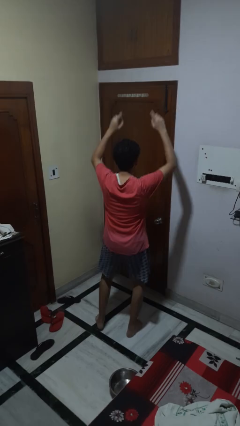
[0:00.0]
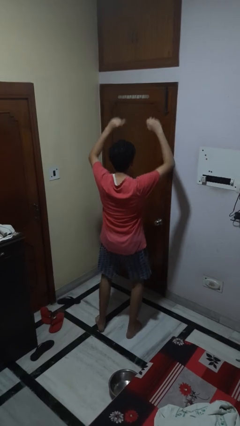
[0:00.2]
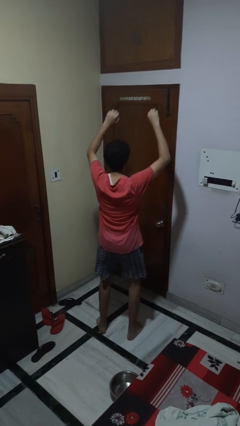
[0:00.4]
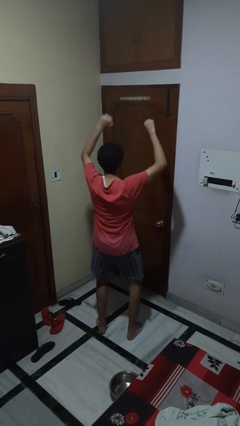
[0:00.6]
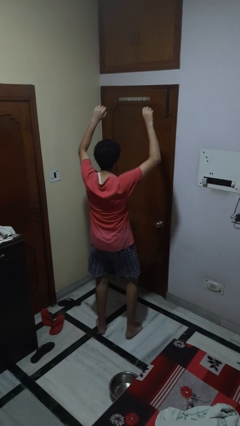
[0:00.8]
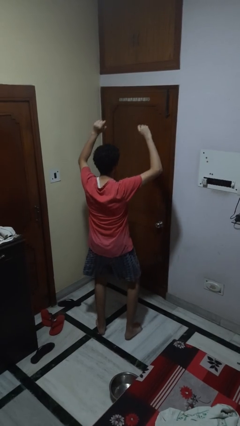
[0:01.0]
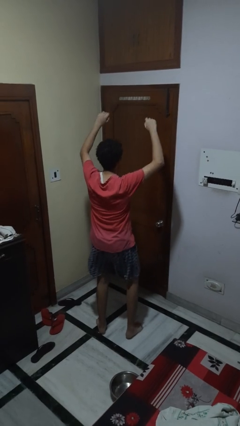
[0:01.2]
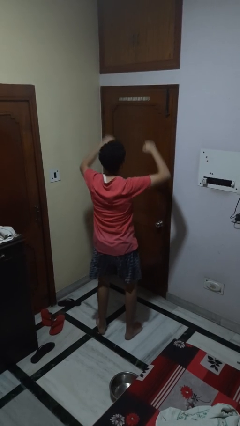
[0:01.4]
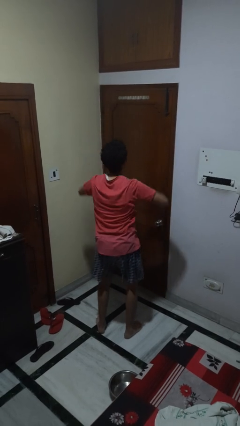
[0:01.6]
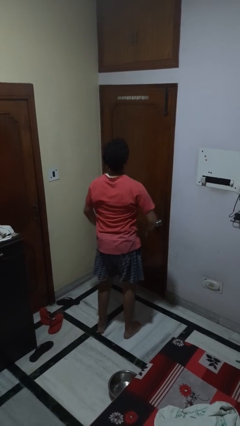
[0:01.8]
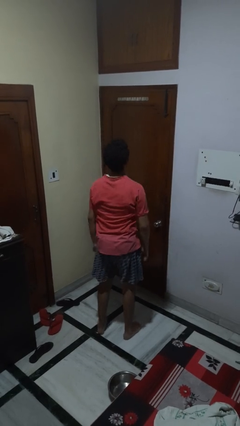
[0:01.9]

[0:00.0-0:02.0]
person dances in place

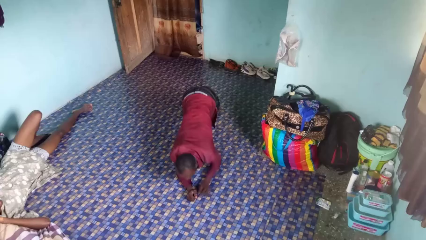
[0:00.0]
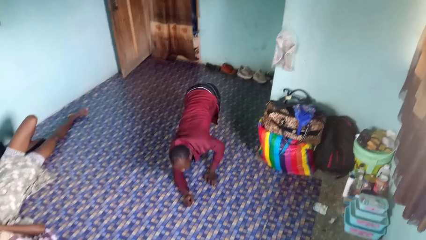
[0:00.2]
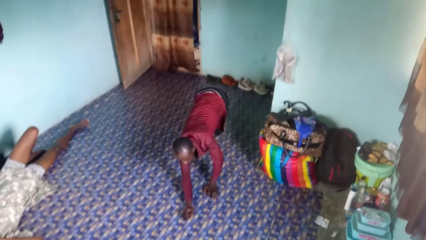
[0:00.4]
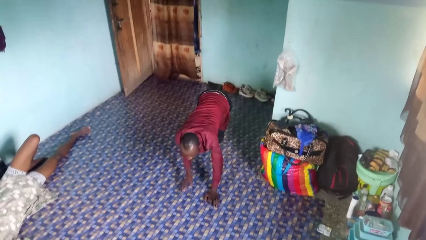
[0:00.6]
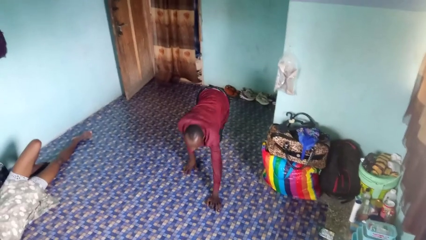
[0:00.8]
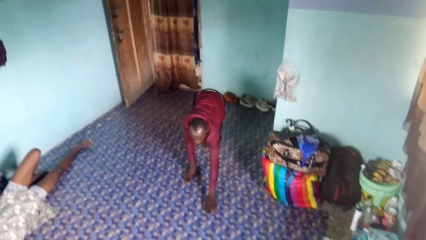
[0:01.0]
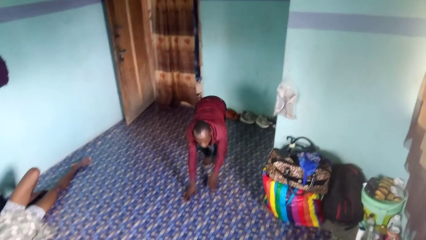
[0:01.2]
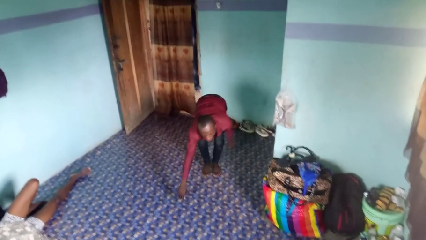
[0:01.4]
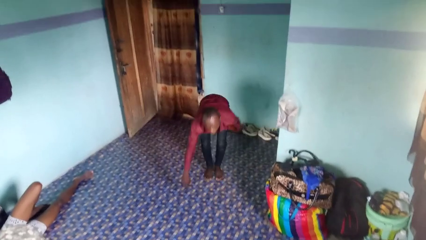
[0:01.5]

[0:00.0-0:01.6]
person stands up from floor

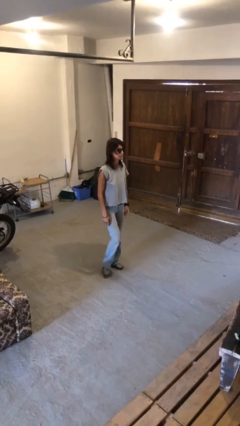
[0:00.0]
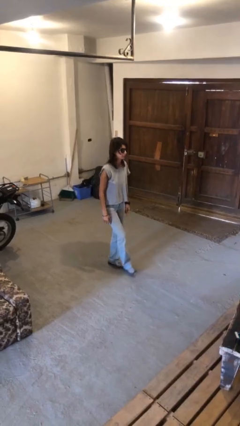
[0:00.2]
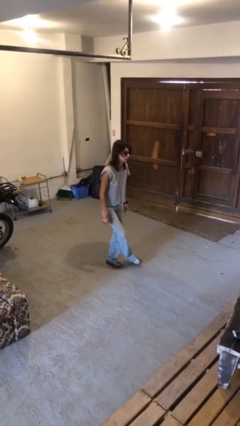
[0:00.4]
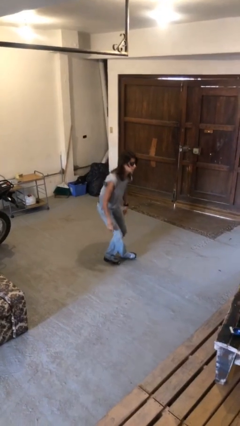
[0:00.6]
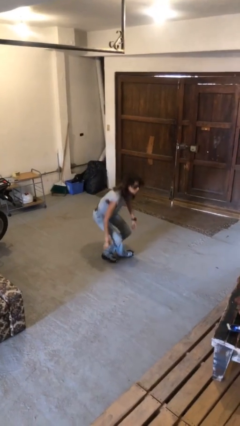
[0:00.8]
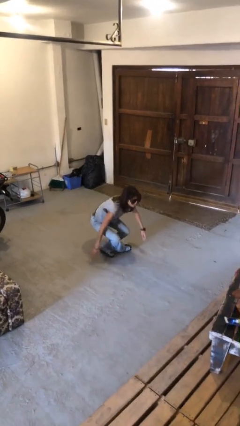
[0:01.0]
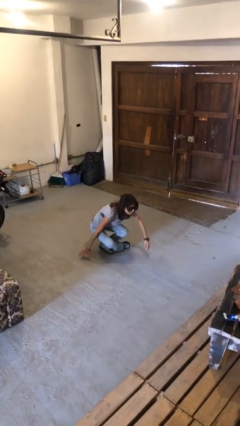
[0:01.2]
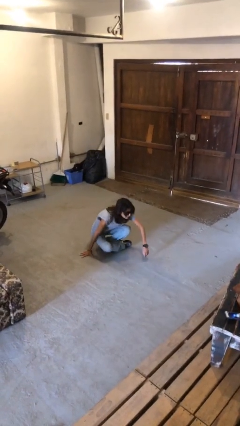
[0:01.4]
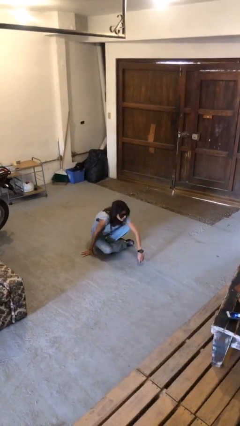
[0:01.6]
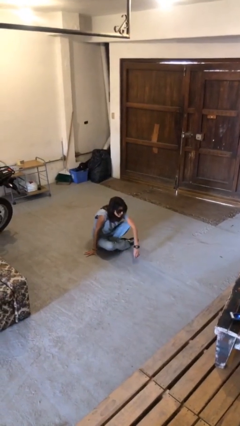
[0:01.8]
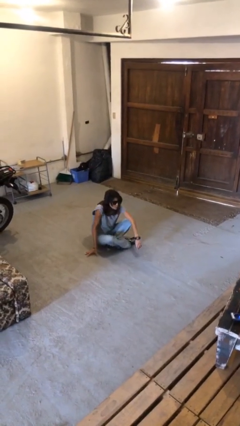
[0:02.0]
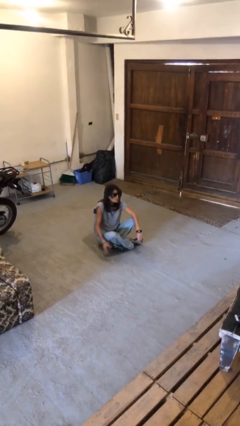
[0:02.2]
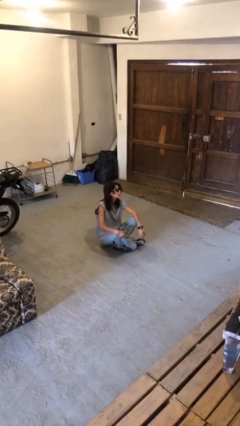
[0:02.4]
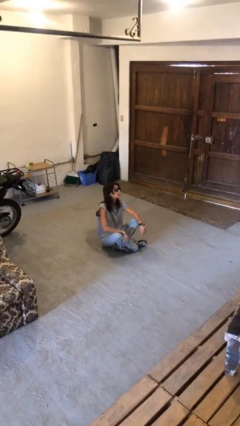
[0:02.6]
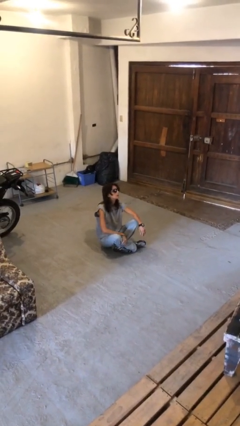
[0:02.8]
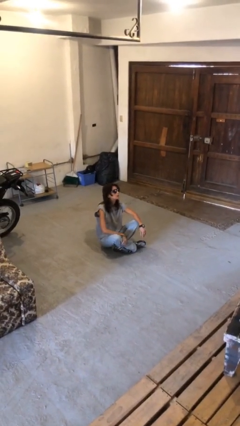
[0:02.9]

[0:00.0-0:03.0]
person sits crisscross

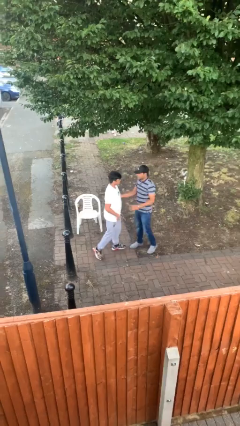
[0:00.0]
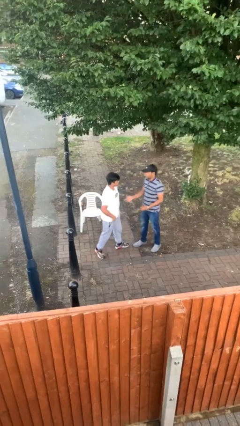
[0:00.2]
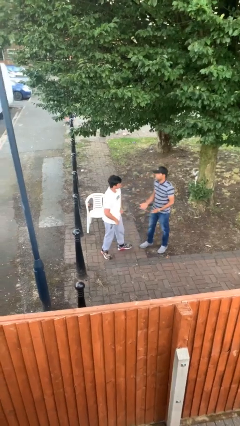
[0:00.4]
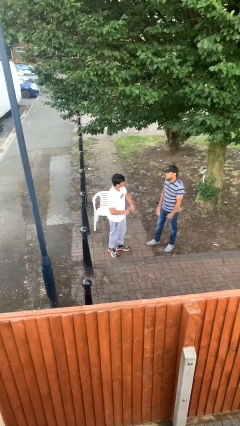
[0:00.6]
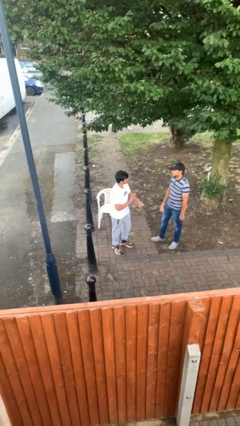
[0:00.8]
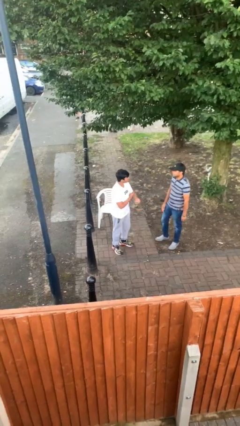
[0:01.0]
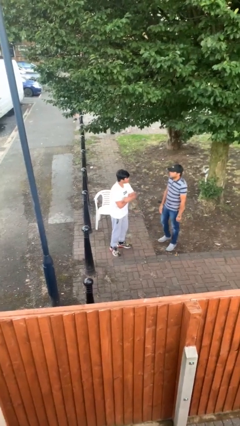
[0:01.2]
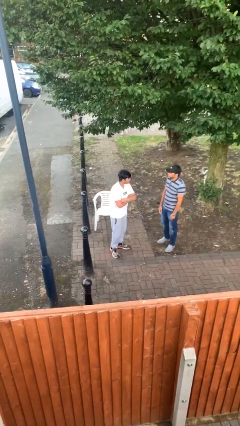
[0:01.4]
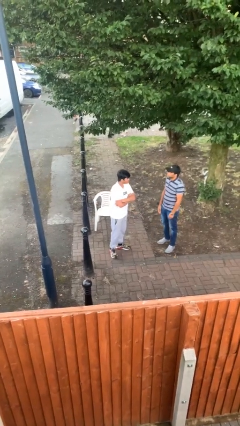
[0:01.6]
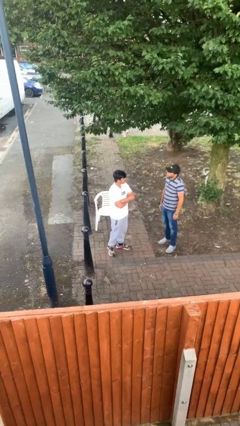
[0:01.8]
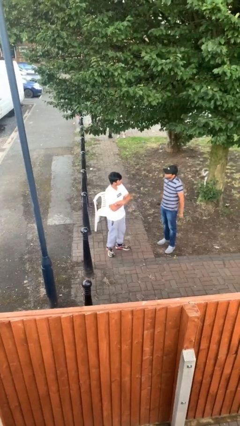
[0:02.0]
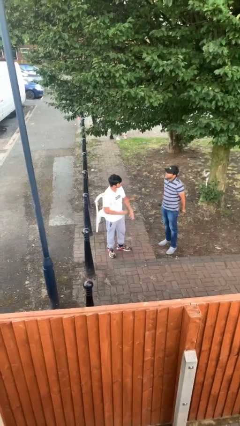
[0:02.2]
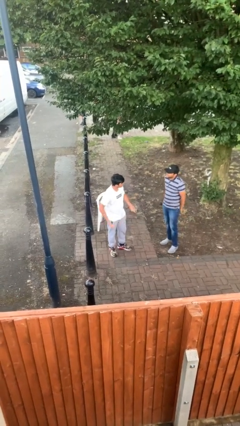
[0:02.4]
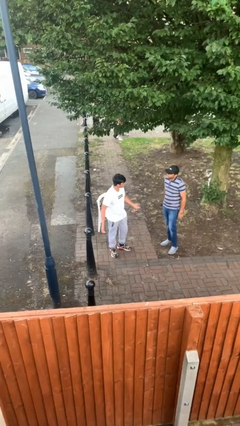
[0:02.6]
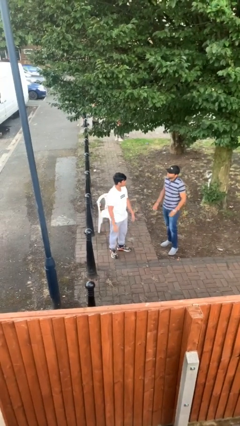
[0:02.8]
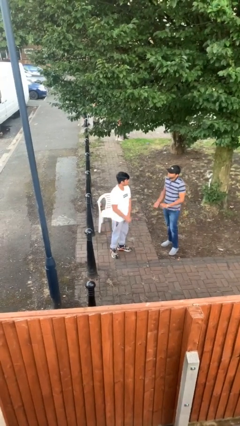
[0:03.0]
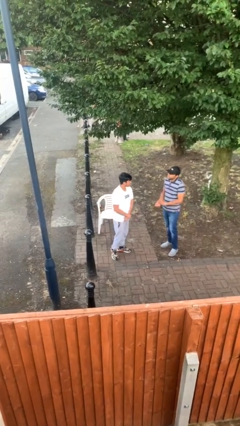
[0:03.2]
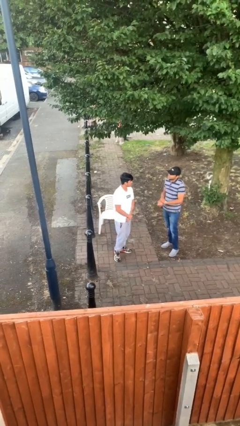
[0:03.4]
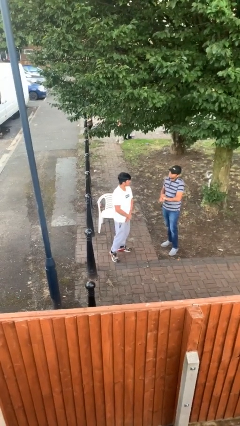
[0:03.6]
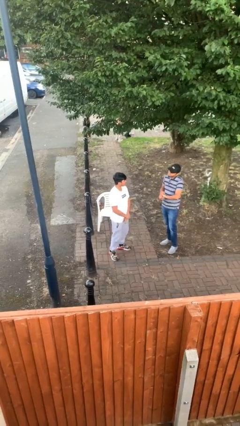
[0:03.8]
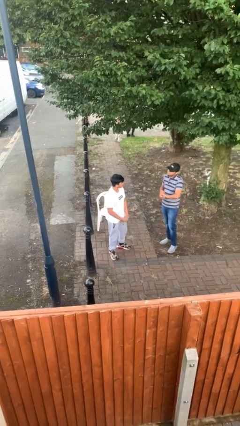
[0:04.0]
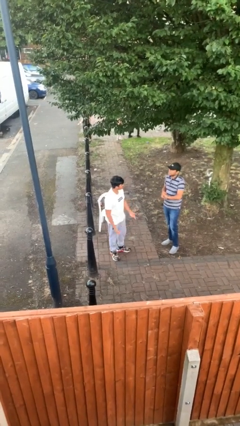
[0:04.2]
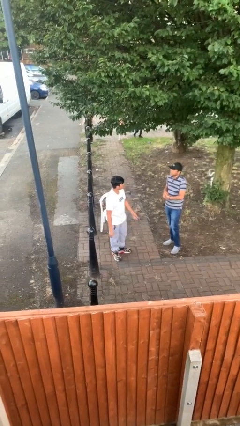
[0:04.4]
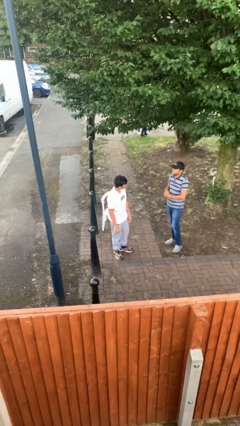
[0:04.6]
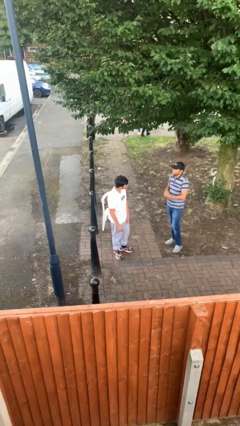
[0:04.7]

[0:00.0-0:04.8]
person talks to person

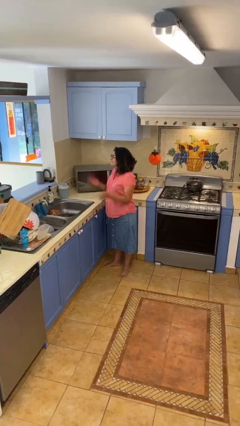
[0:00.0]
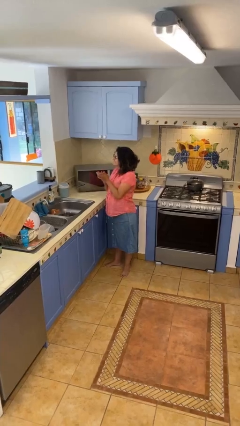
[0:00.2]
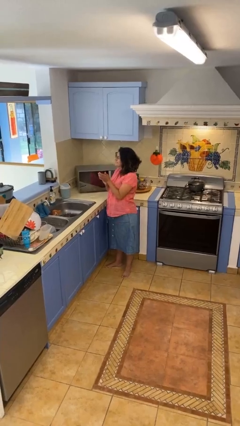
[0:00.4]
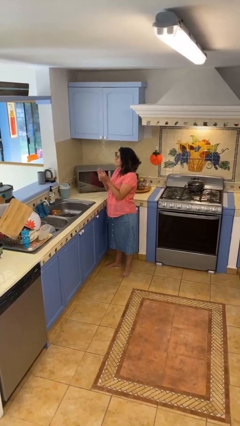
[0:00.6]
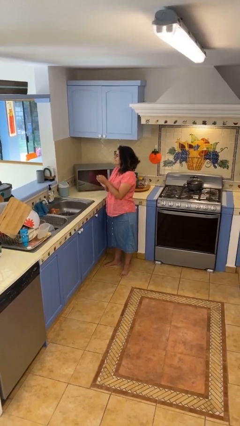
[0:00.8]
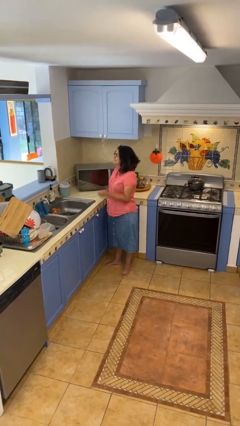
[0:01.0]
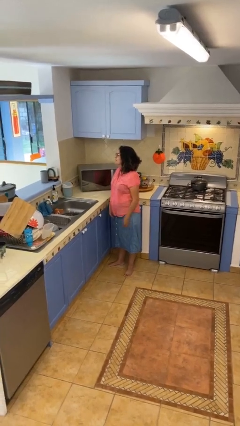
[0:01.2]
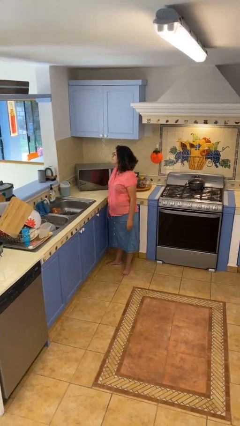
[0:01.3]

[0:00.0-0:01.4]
person claps hands

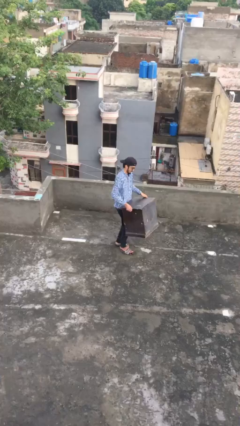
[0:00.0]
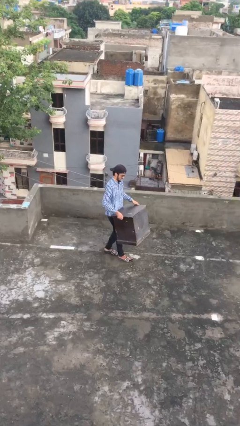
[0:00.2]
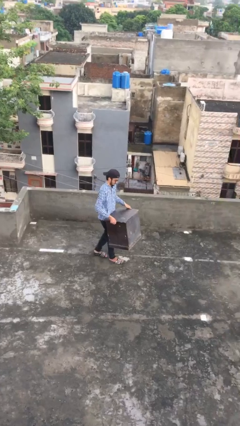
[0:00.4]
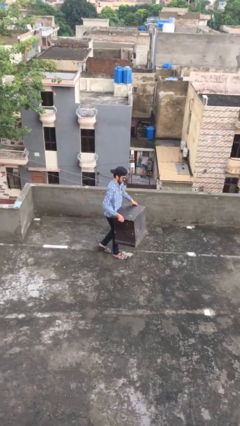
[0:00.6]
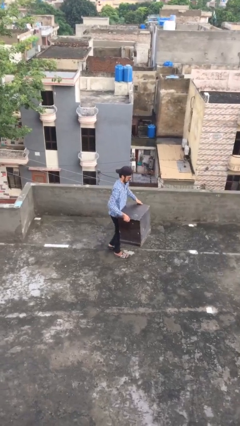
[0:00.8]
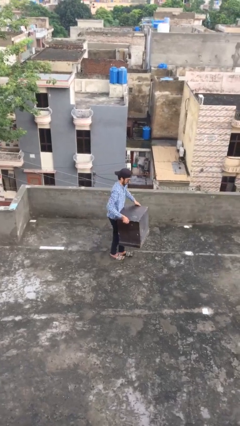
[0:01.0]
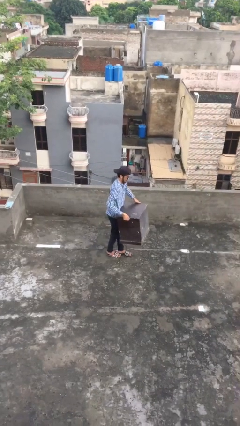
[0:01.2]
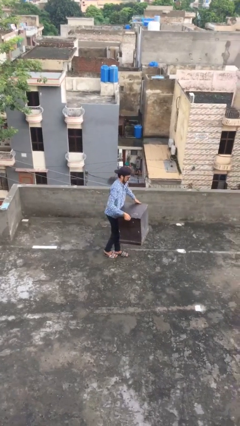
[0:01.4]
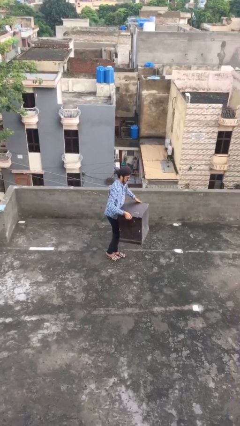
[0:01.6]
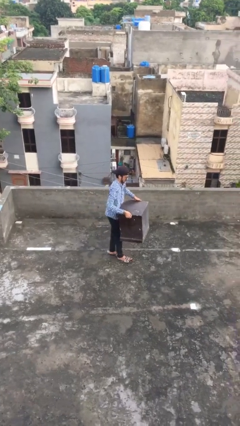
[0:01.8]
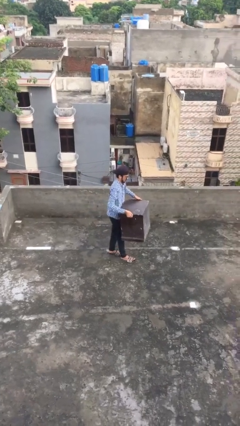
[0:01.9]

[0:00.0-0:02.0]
person carries heavy object

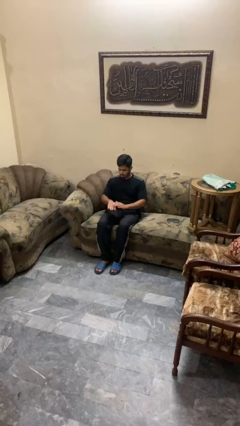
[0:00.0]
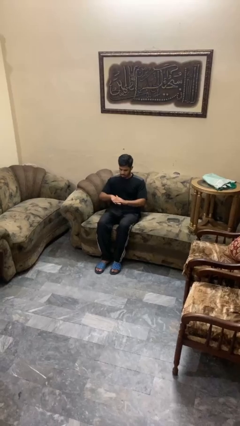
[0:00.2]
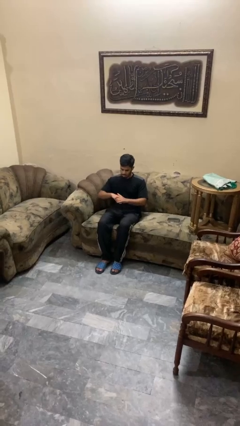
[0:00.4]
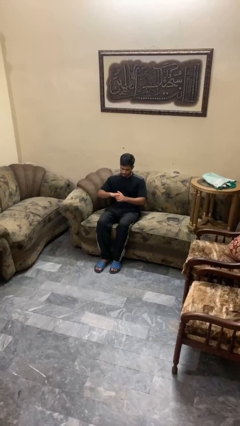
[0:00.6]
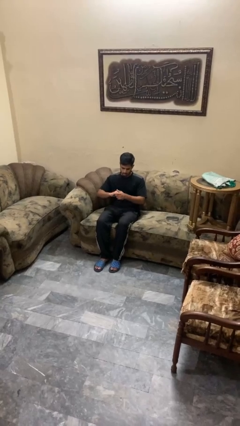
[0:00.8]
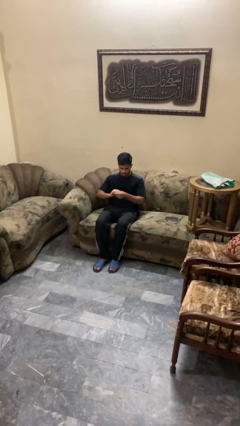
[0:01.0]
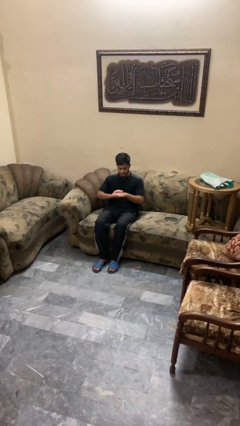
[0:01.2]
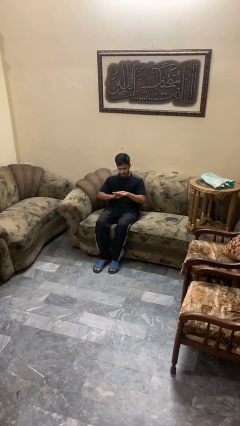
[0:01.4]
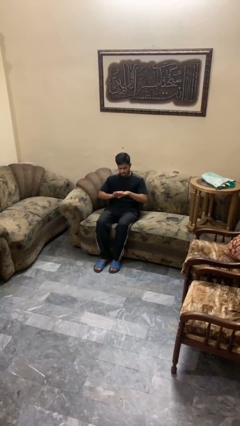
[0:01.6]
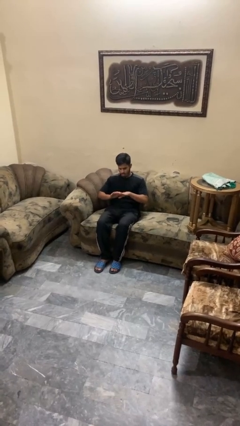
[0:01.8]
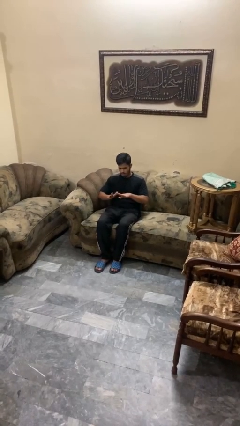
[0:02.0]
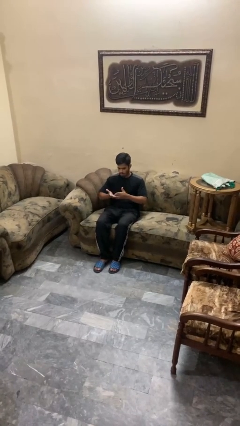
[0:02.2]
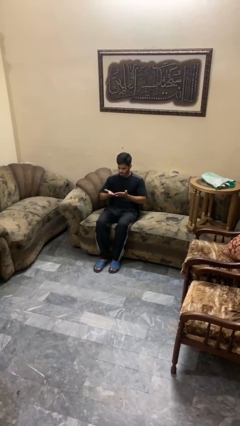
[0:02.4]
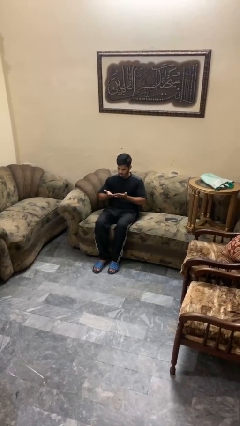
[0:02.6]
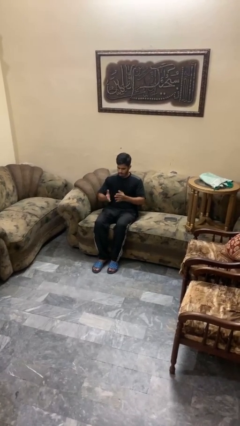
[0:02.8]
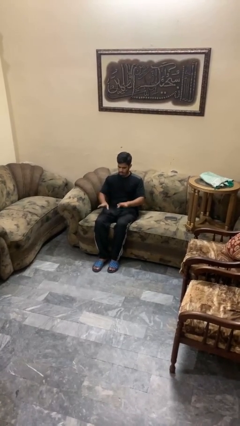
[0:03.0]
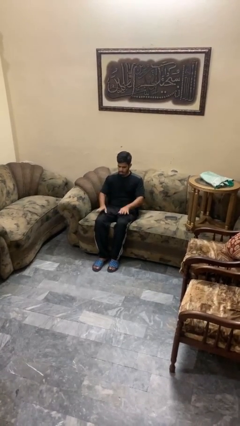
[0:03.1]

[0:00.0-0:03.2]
person looks at hands in lap
